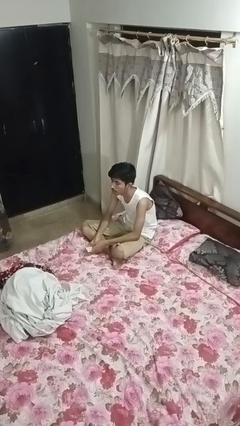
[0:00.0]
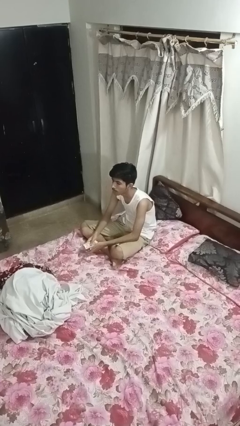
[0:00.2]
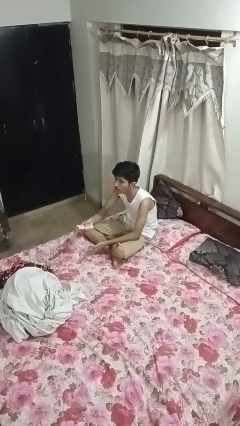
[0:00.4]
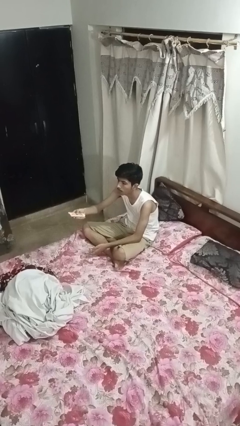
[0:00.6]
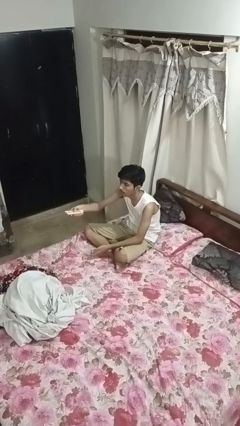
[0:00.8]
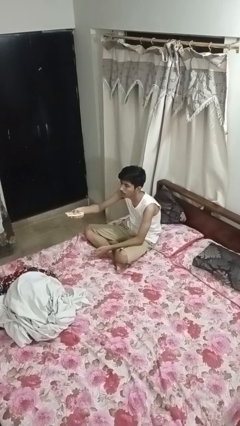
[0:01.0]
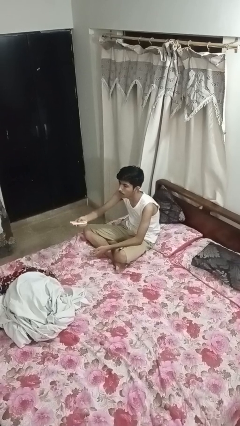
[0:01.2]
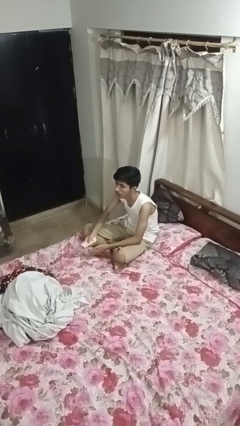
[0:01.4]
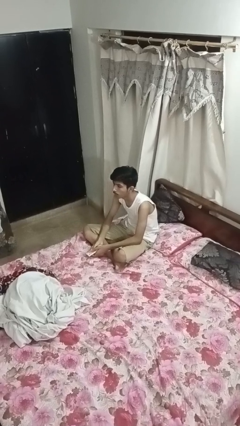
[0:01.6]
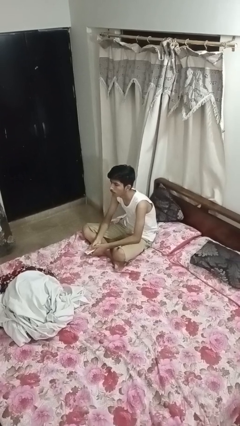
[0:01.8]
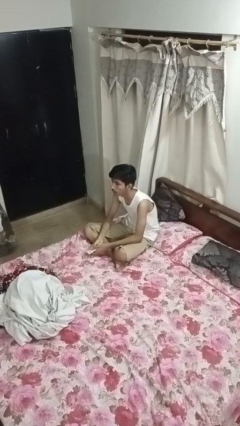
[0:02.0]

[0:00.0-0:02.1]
person uses television remote

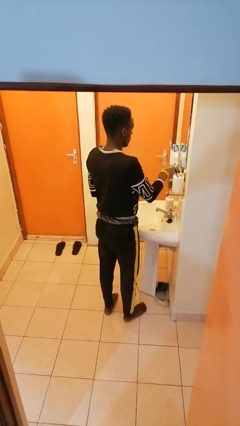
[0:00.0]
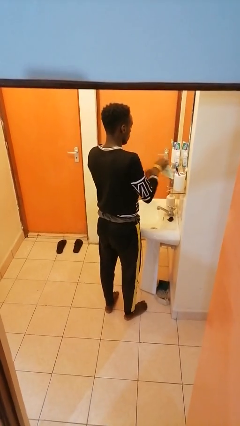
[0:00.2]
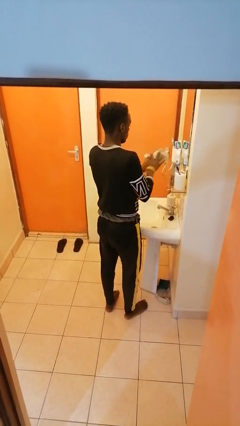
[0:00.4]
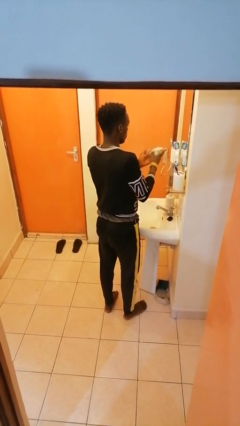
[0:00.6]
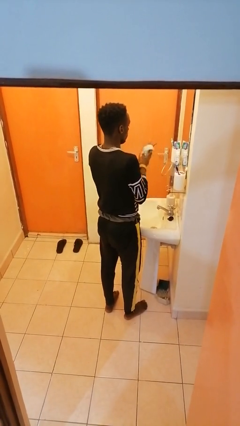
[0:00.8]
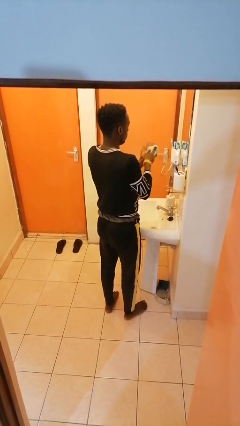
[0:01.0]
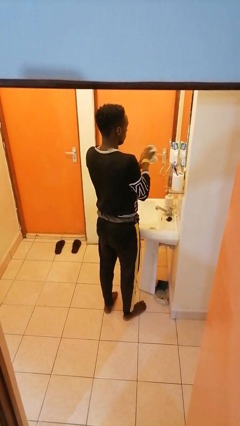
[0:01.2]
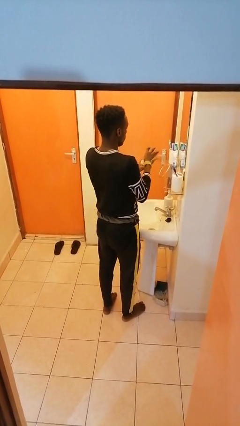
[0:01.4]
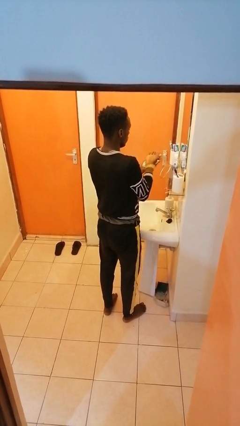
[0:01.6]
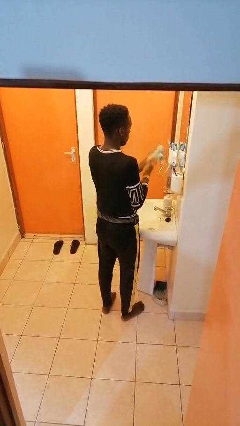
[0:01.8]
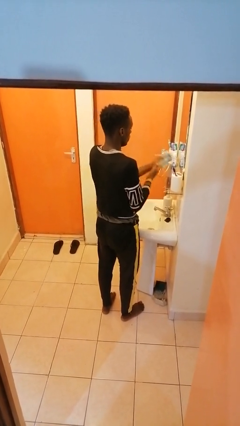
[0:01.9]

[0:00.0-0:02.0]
person dries hands with towel

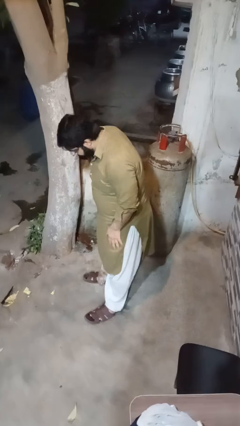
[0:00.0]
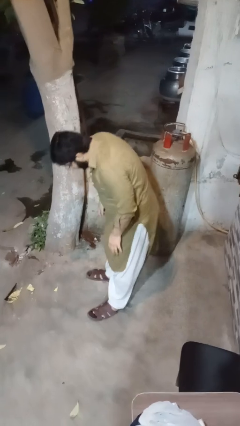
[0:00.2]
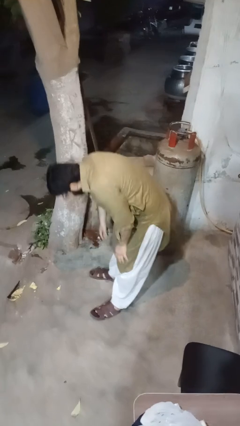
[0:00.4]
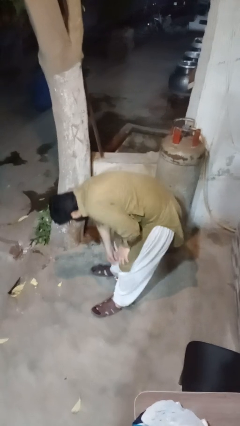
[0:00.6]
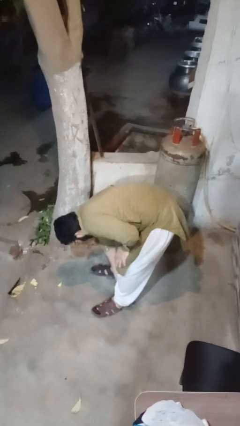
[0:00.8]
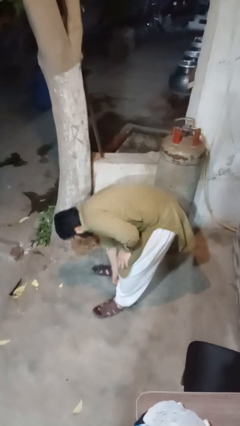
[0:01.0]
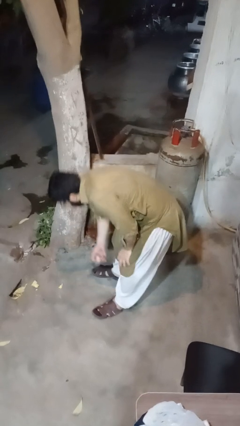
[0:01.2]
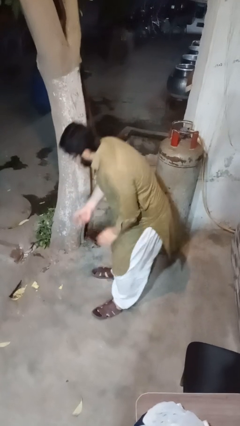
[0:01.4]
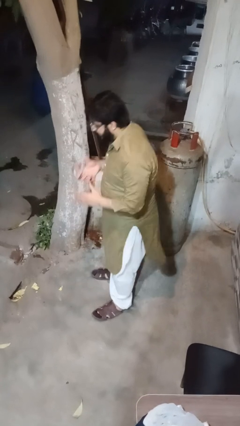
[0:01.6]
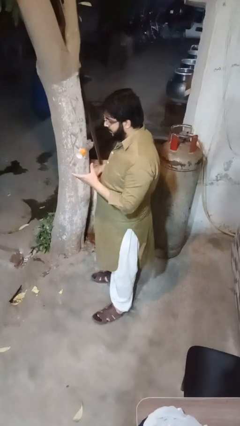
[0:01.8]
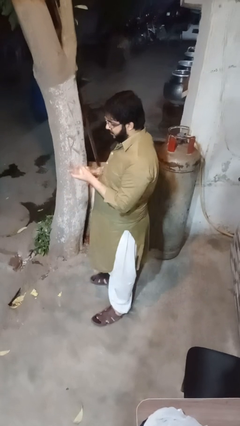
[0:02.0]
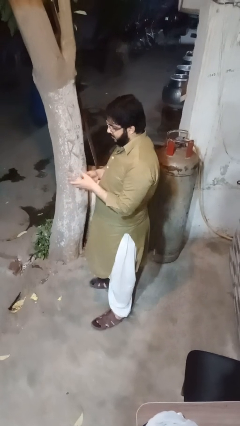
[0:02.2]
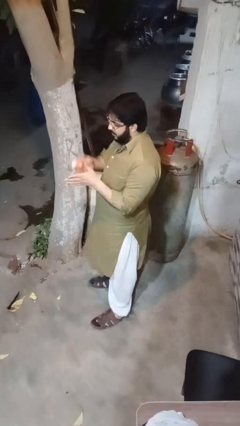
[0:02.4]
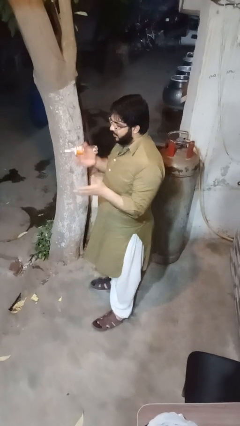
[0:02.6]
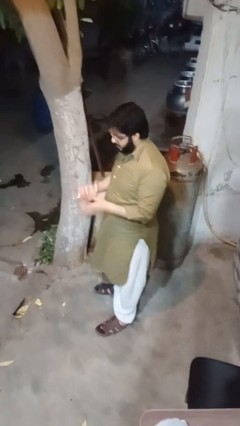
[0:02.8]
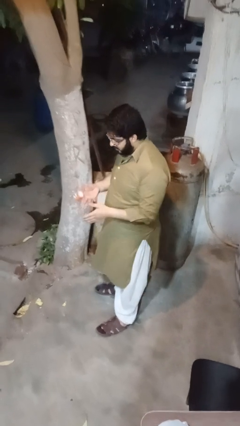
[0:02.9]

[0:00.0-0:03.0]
person picks up object from floor

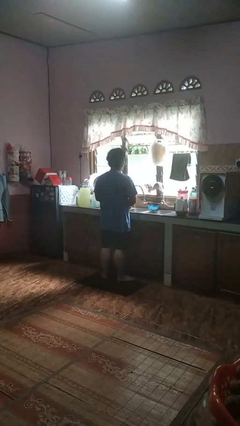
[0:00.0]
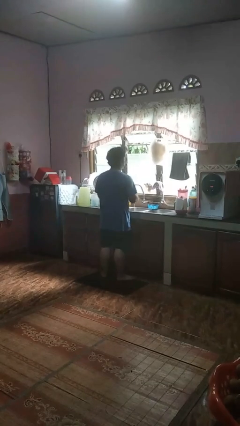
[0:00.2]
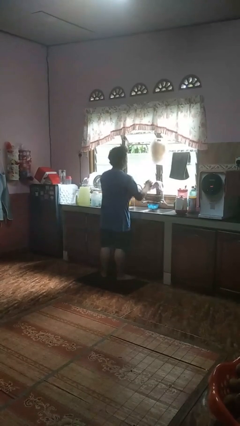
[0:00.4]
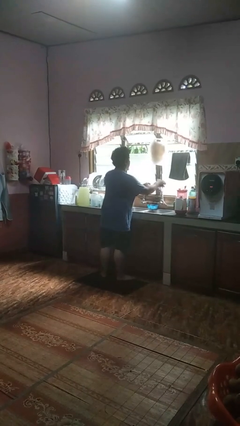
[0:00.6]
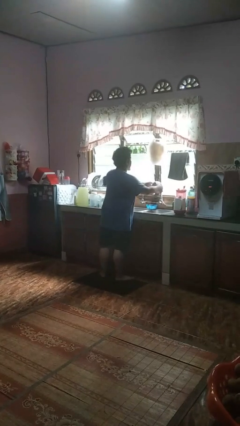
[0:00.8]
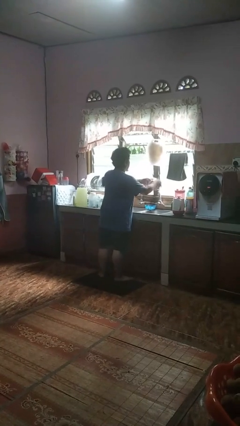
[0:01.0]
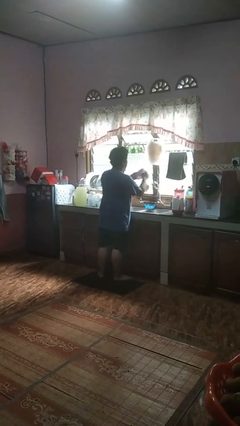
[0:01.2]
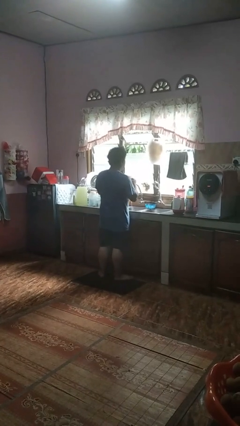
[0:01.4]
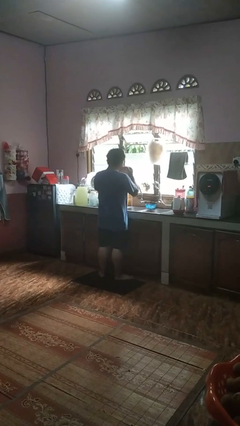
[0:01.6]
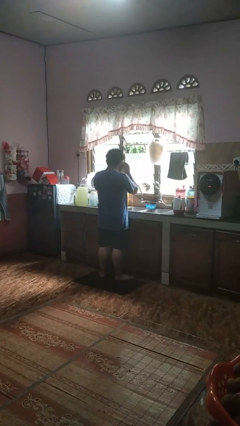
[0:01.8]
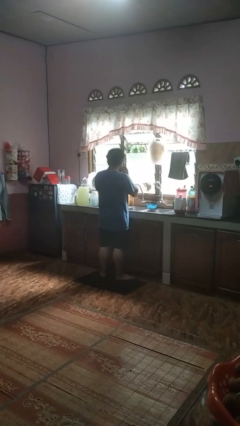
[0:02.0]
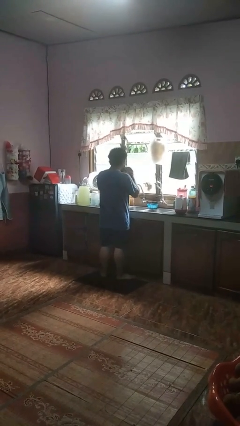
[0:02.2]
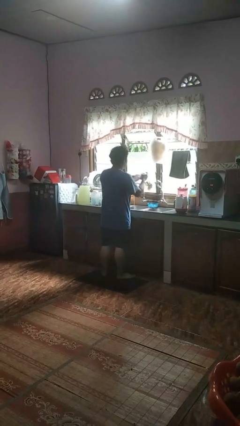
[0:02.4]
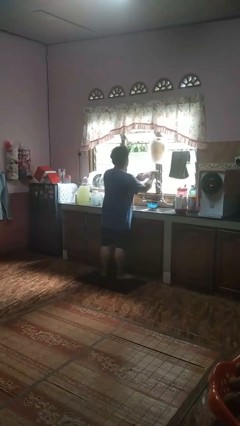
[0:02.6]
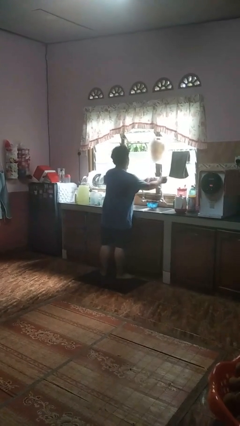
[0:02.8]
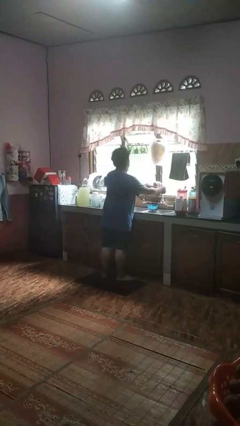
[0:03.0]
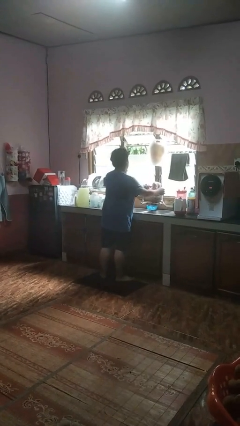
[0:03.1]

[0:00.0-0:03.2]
person dries face with towel

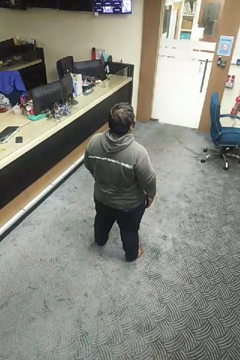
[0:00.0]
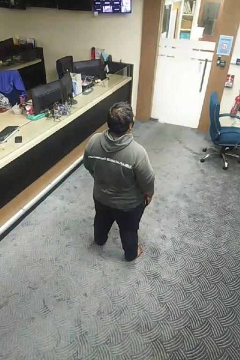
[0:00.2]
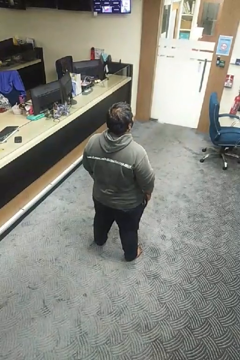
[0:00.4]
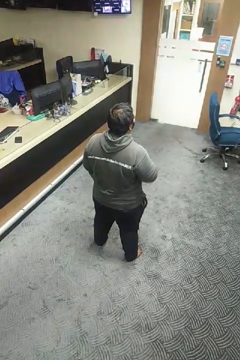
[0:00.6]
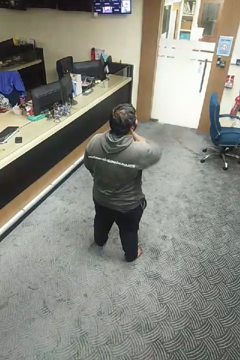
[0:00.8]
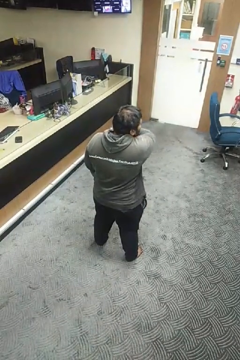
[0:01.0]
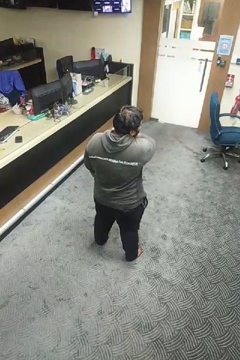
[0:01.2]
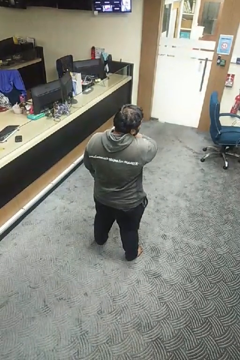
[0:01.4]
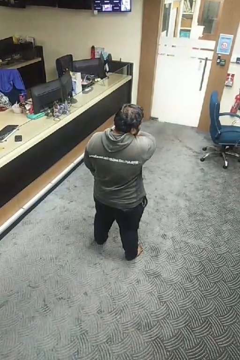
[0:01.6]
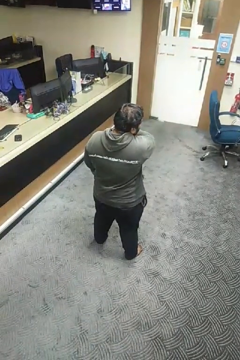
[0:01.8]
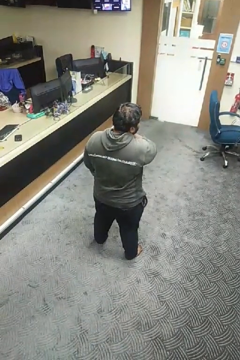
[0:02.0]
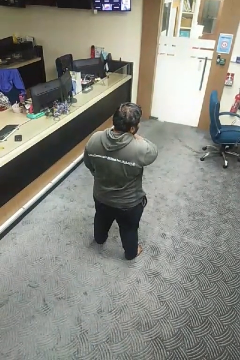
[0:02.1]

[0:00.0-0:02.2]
person rubs neck

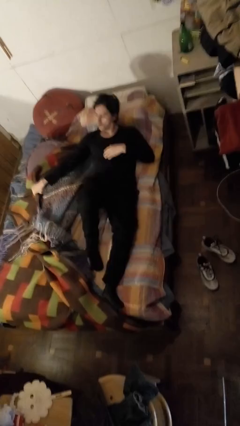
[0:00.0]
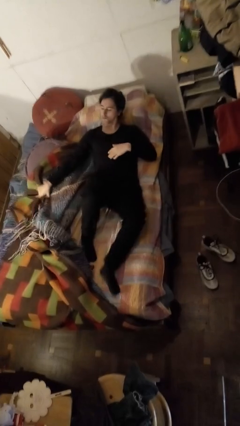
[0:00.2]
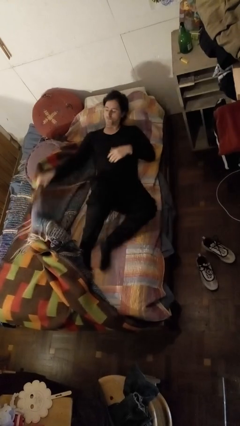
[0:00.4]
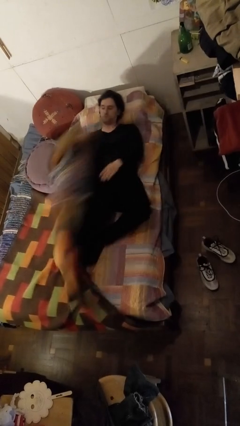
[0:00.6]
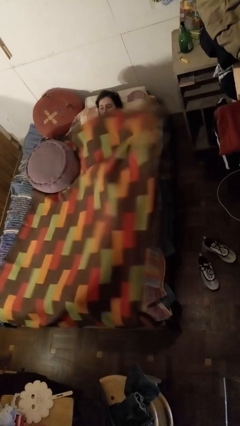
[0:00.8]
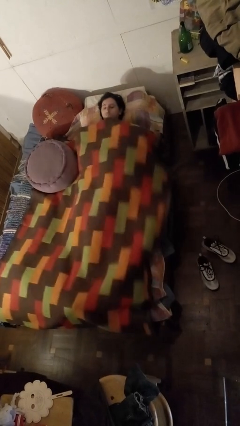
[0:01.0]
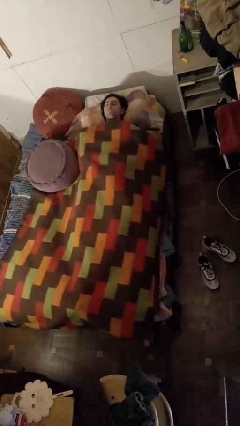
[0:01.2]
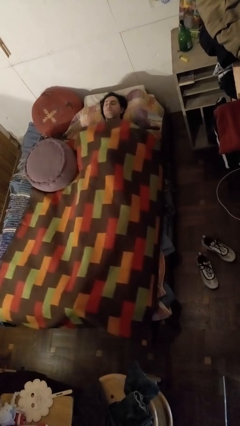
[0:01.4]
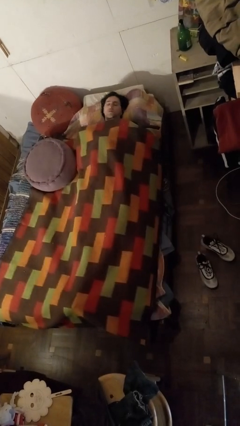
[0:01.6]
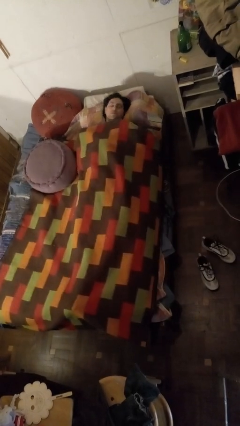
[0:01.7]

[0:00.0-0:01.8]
person covers with bedsheets

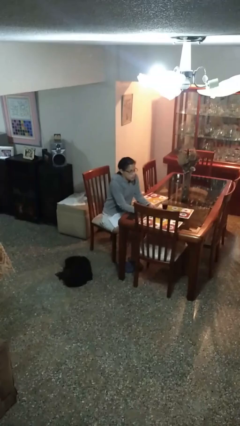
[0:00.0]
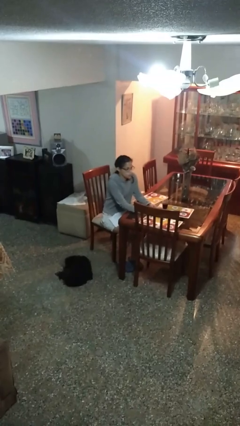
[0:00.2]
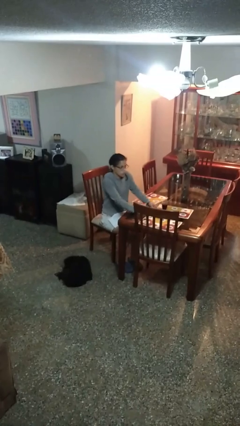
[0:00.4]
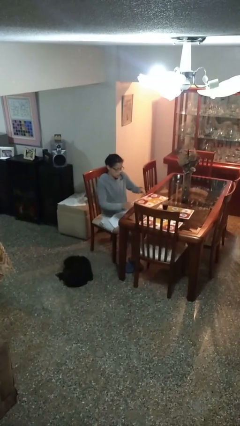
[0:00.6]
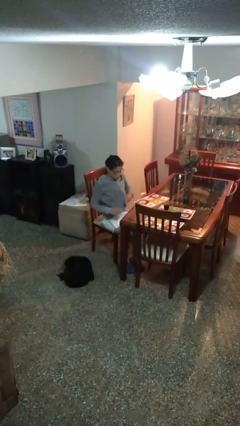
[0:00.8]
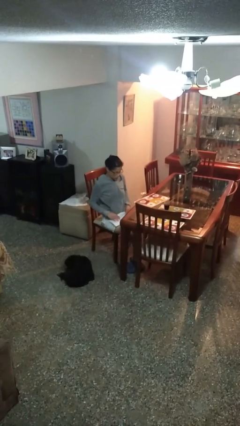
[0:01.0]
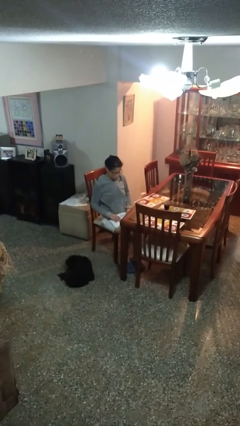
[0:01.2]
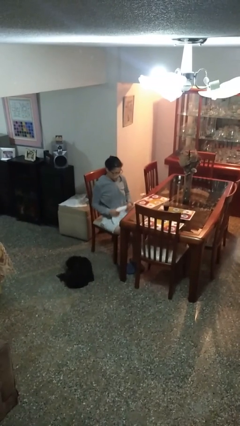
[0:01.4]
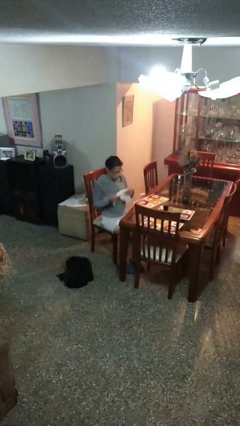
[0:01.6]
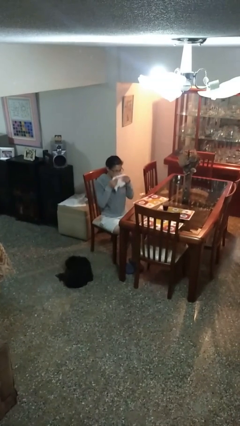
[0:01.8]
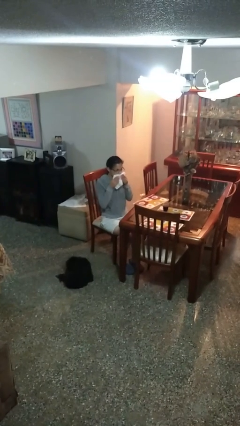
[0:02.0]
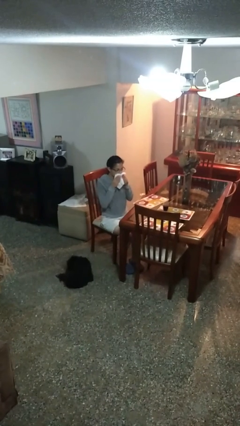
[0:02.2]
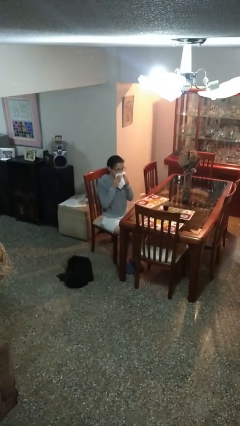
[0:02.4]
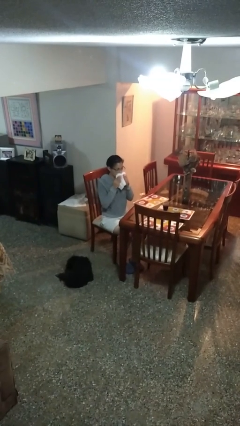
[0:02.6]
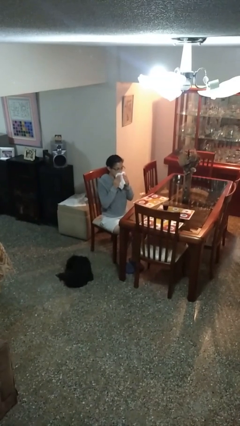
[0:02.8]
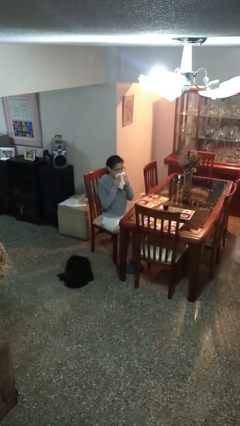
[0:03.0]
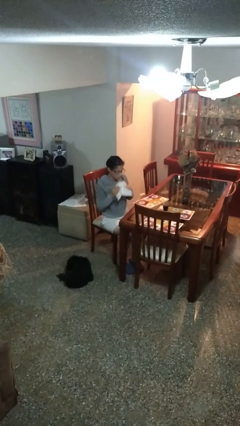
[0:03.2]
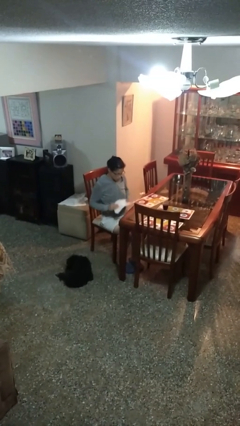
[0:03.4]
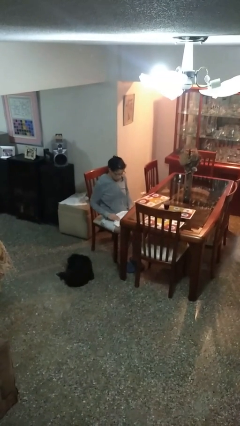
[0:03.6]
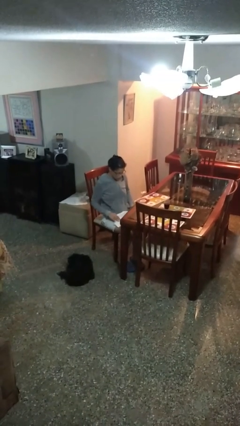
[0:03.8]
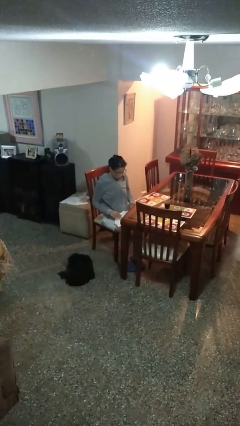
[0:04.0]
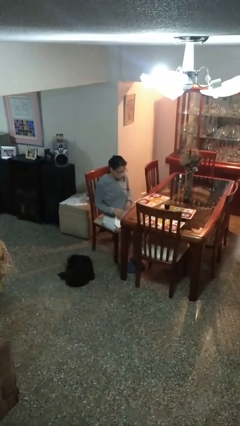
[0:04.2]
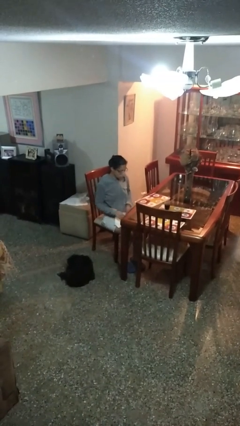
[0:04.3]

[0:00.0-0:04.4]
person wipes mouth with napkin
